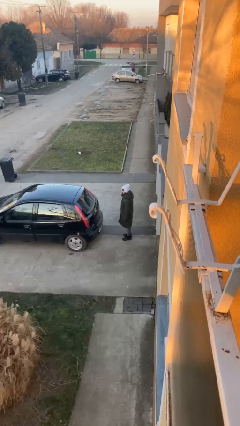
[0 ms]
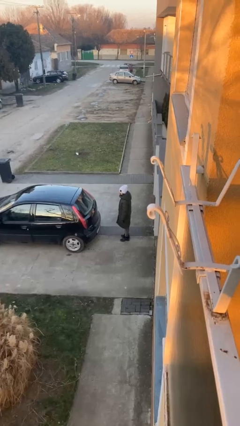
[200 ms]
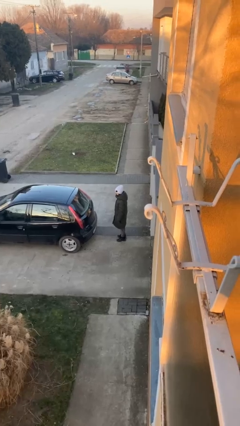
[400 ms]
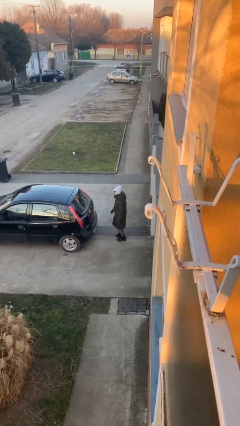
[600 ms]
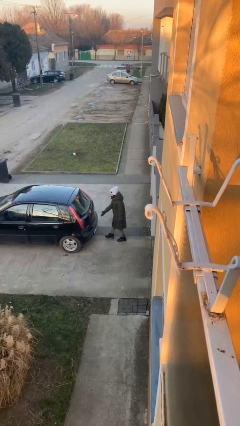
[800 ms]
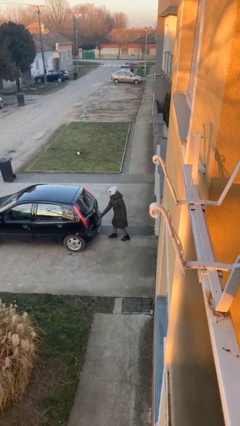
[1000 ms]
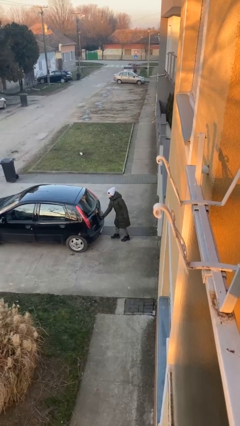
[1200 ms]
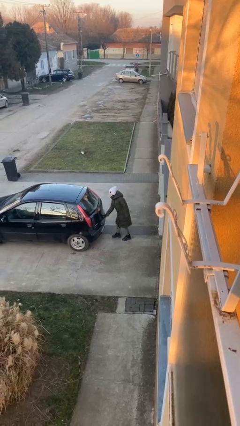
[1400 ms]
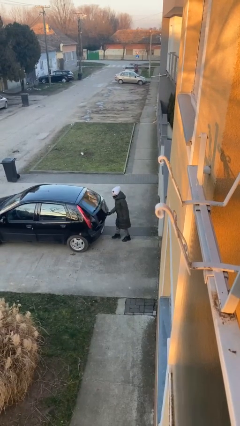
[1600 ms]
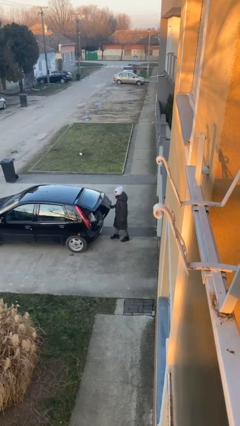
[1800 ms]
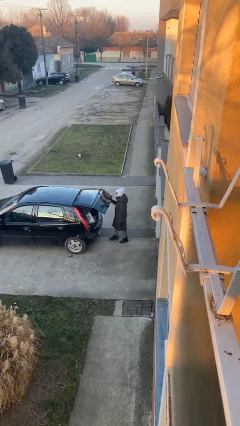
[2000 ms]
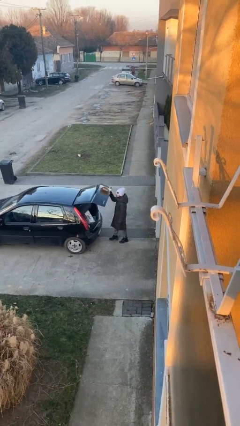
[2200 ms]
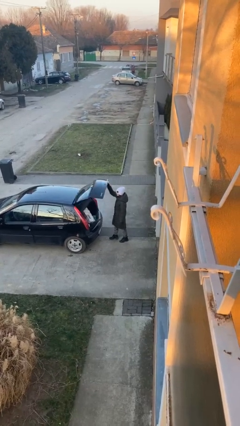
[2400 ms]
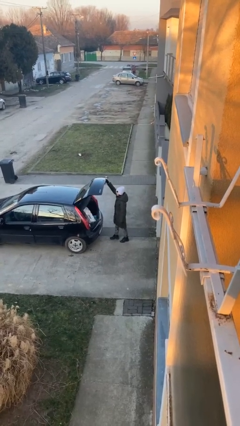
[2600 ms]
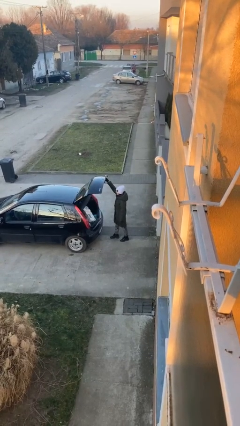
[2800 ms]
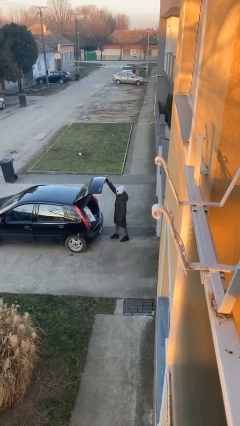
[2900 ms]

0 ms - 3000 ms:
person opens car trunk

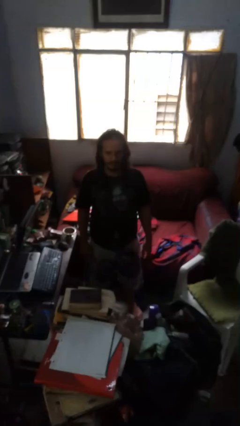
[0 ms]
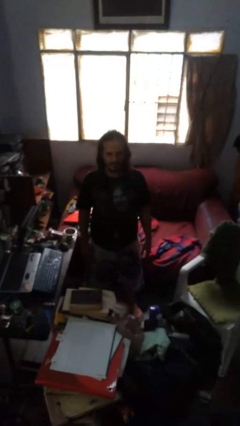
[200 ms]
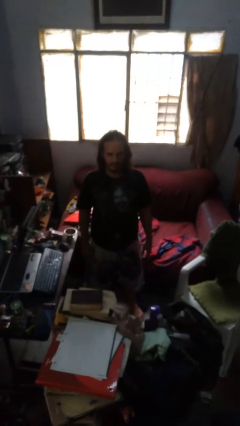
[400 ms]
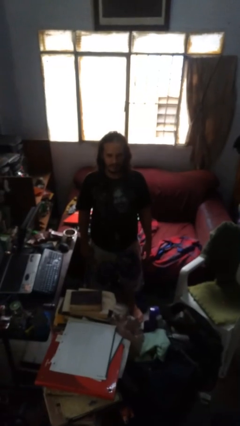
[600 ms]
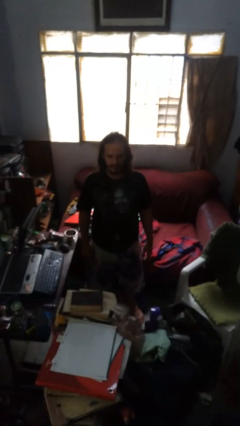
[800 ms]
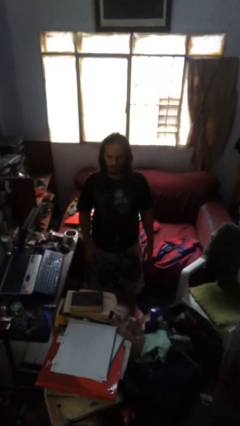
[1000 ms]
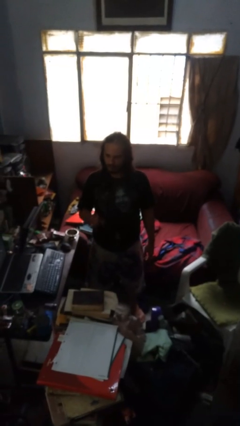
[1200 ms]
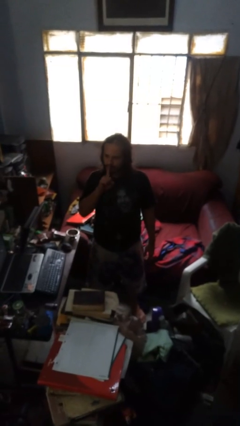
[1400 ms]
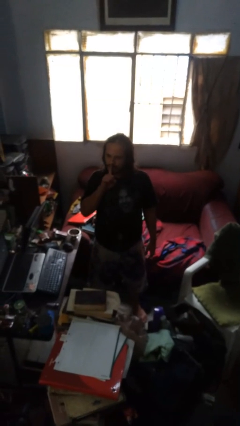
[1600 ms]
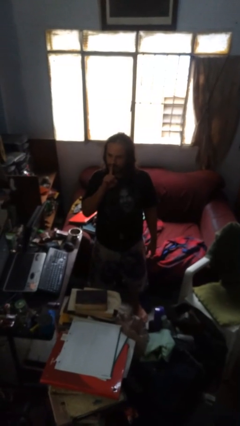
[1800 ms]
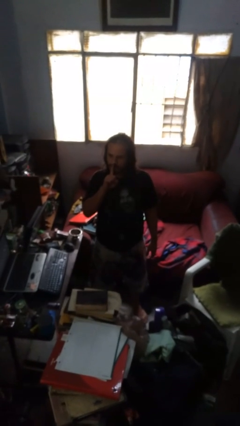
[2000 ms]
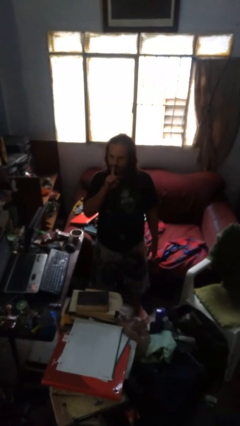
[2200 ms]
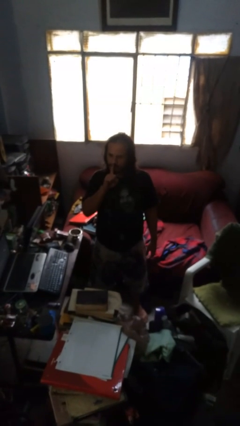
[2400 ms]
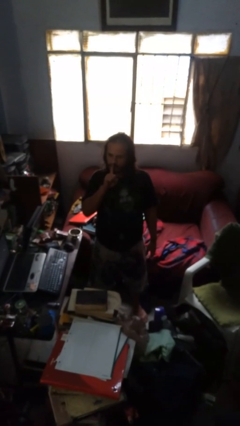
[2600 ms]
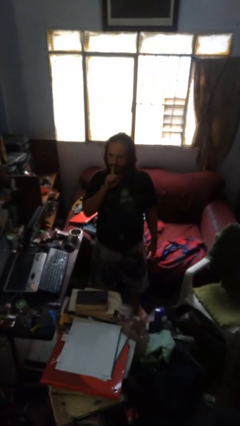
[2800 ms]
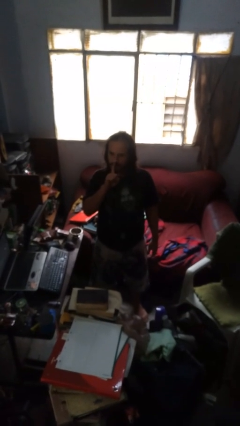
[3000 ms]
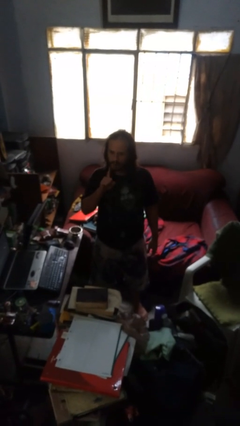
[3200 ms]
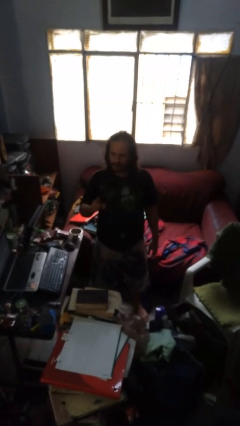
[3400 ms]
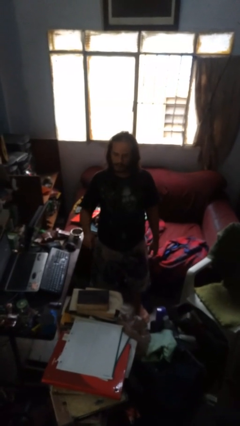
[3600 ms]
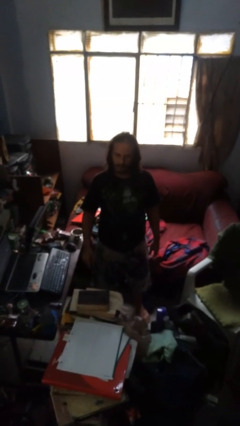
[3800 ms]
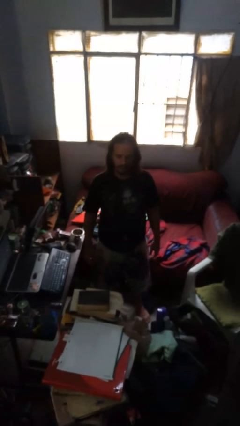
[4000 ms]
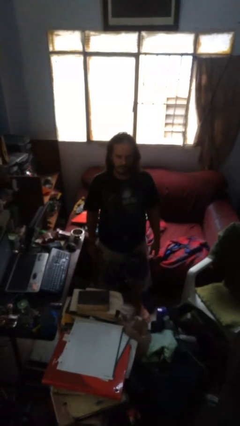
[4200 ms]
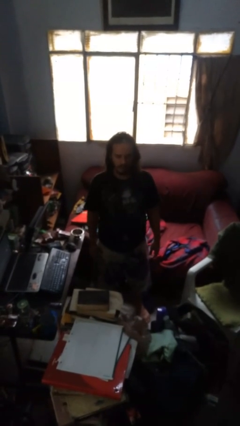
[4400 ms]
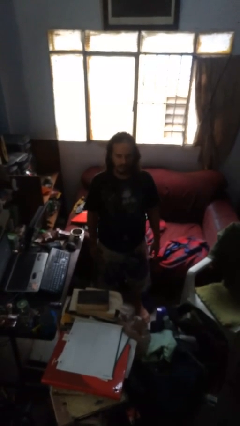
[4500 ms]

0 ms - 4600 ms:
person gestures be quiet

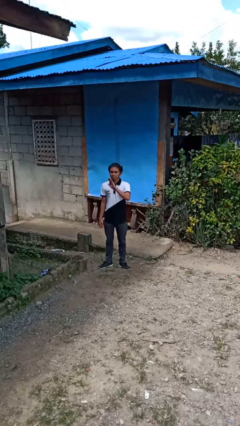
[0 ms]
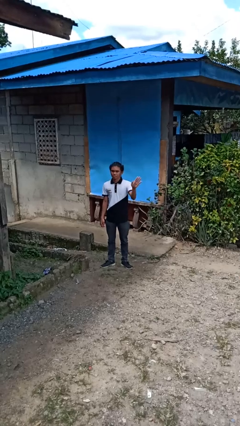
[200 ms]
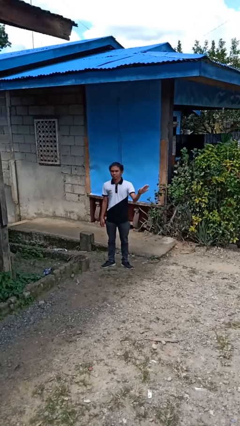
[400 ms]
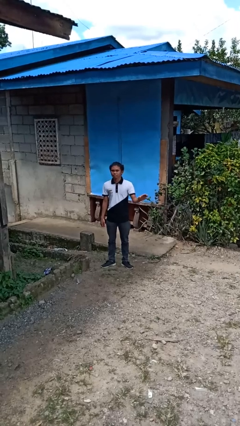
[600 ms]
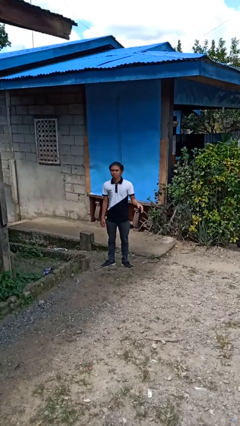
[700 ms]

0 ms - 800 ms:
person gestures swipe left

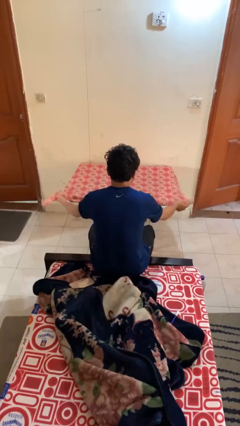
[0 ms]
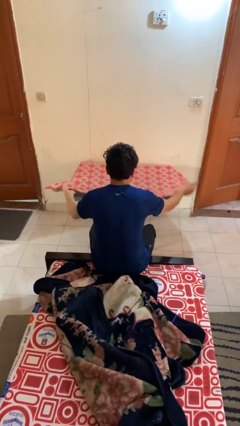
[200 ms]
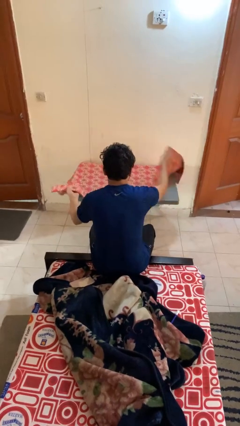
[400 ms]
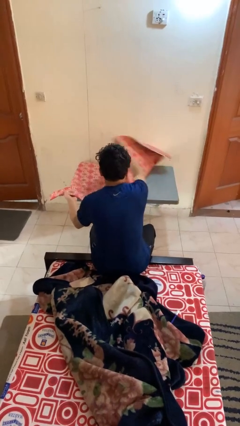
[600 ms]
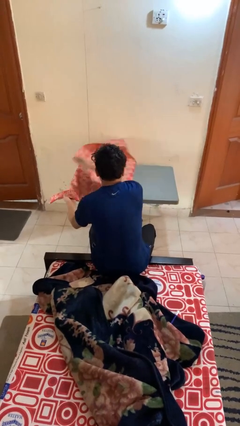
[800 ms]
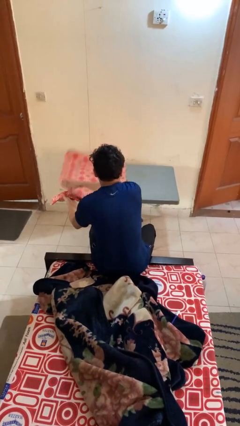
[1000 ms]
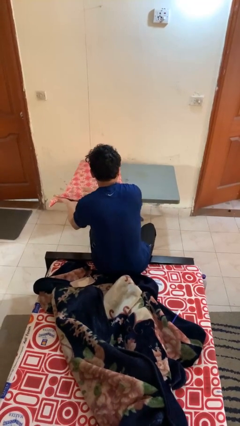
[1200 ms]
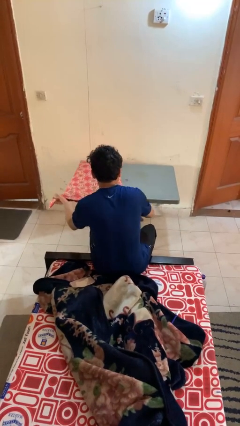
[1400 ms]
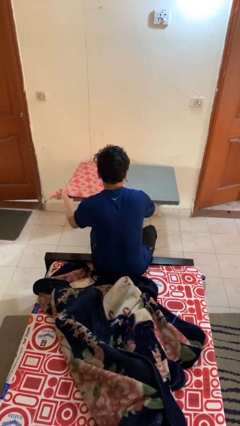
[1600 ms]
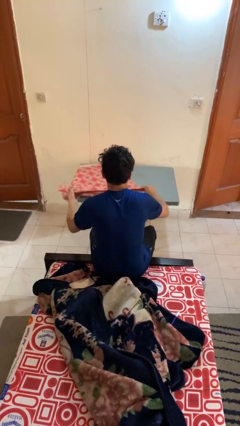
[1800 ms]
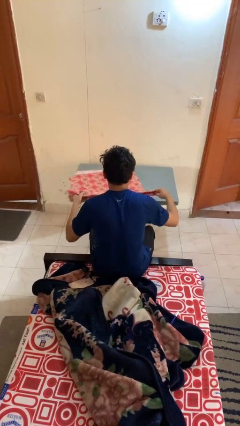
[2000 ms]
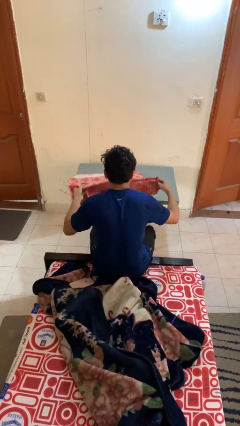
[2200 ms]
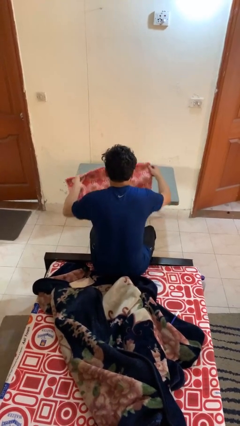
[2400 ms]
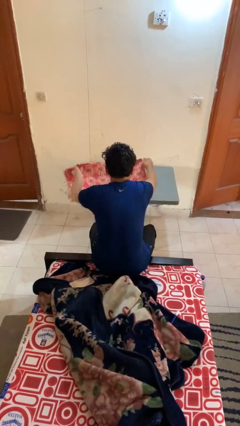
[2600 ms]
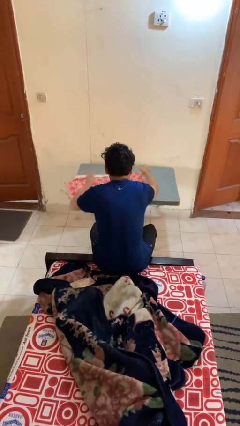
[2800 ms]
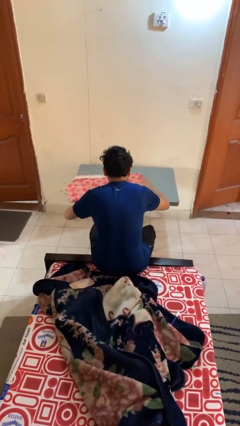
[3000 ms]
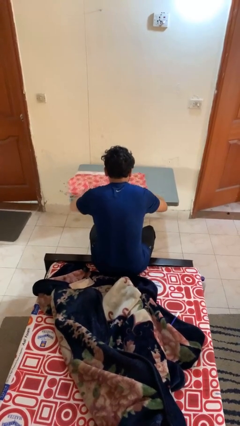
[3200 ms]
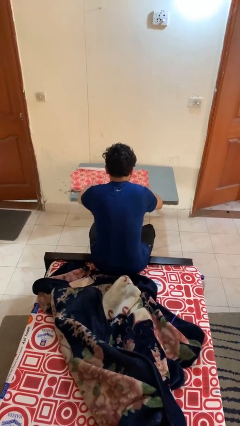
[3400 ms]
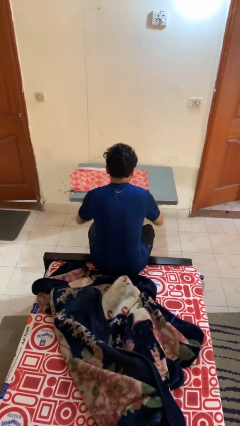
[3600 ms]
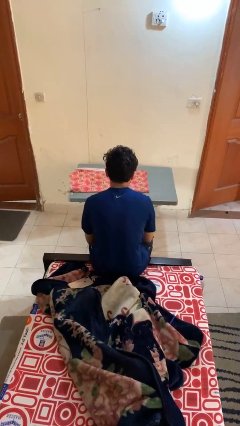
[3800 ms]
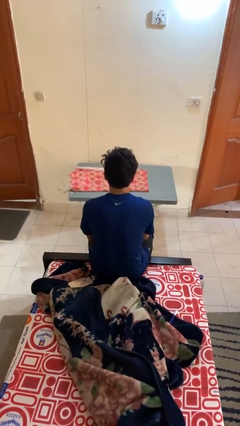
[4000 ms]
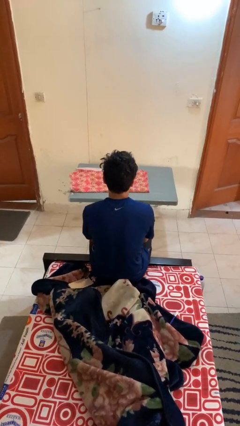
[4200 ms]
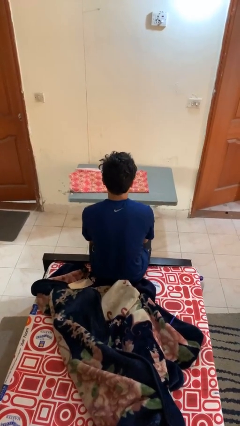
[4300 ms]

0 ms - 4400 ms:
person folds tablecloth

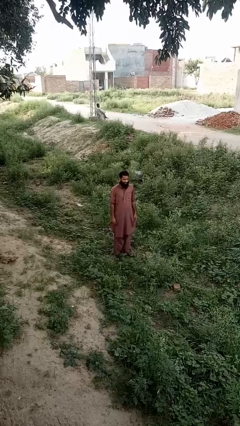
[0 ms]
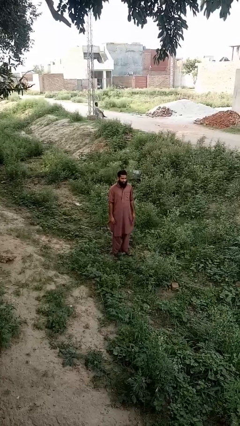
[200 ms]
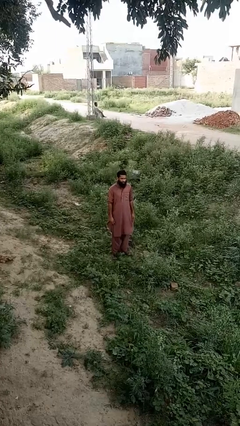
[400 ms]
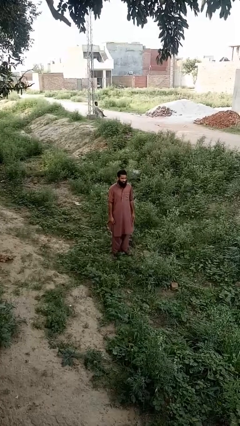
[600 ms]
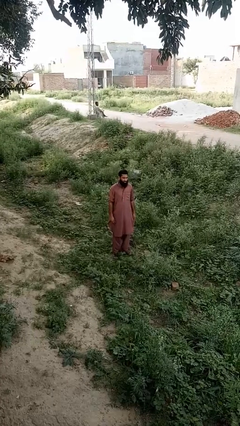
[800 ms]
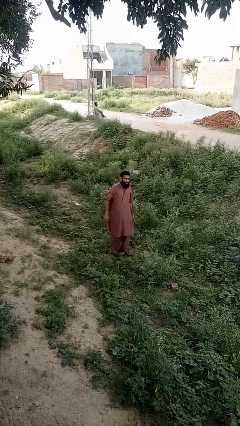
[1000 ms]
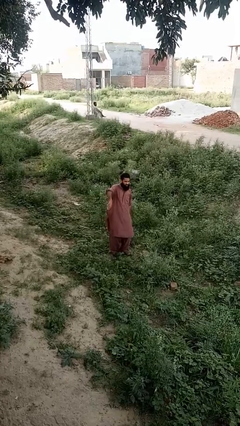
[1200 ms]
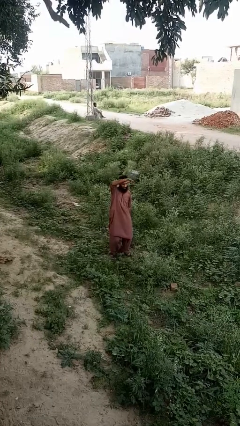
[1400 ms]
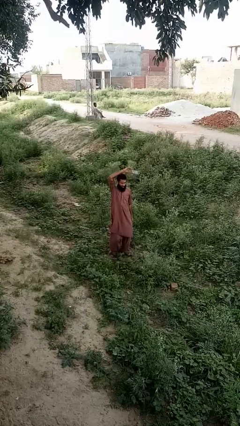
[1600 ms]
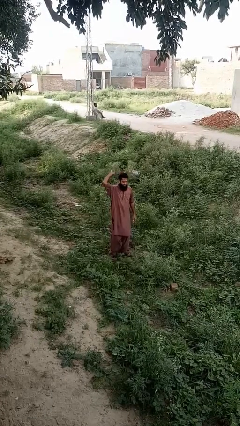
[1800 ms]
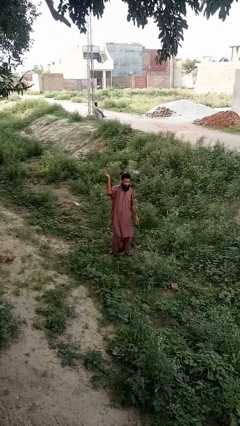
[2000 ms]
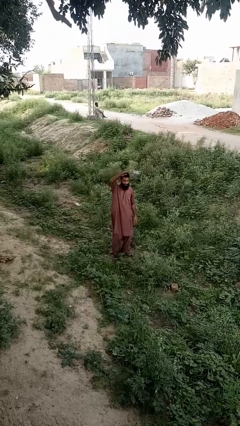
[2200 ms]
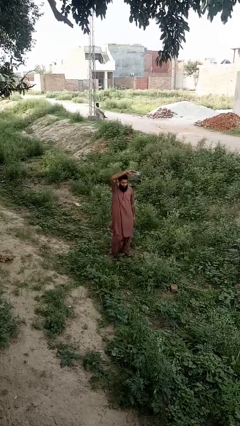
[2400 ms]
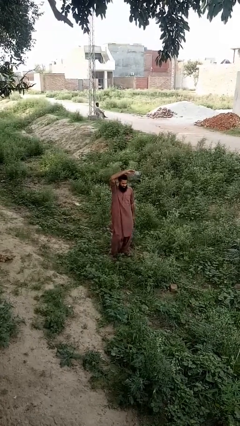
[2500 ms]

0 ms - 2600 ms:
person dances in place

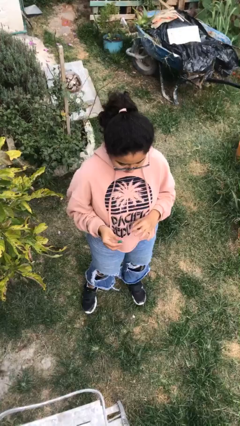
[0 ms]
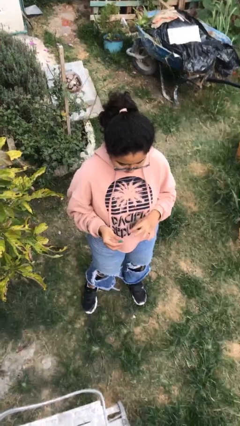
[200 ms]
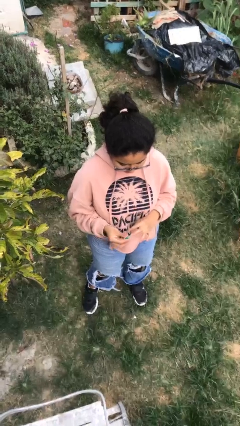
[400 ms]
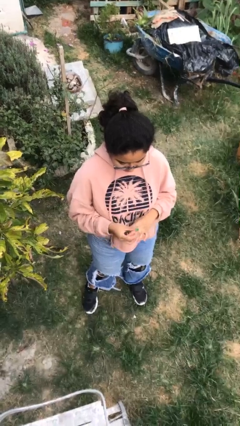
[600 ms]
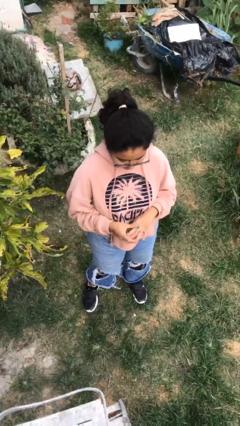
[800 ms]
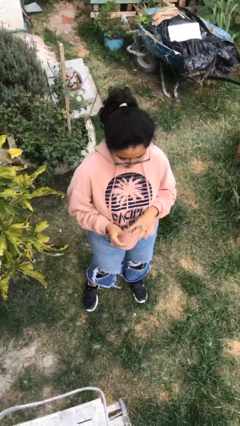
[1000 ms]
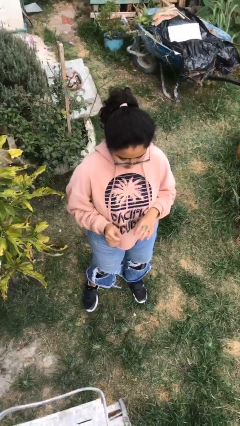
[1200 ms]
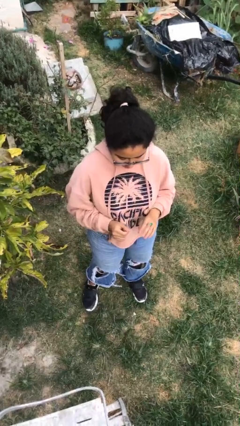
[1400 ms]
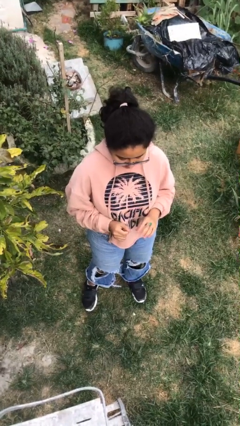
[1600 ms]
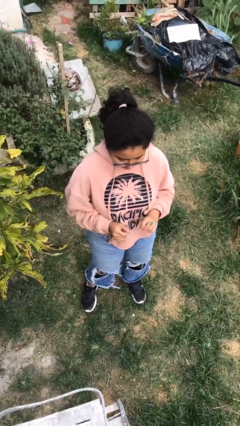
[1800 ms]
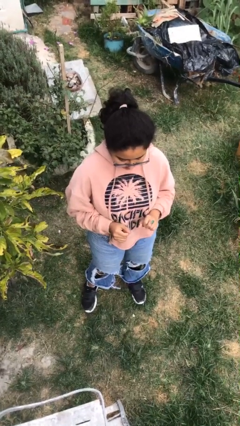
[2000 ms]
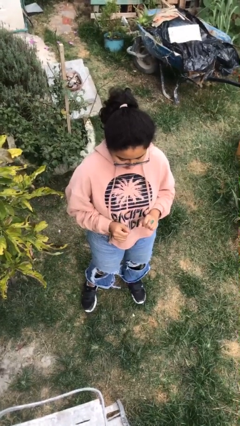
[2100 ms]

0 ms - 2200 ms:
person puts on ring
